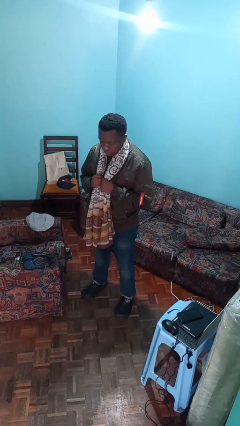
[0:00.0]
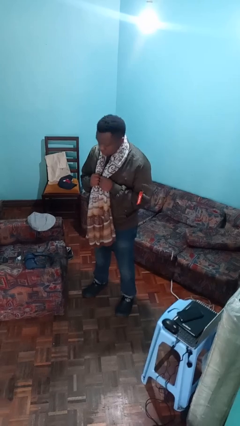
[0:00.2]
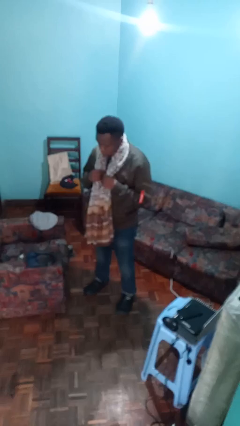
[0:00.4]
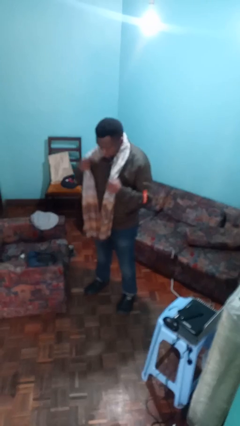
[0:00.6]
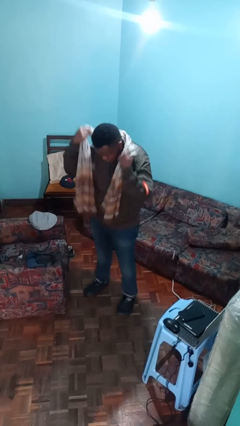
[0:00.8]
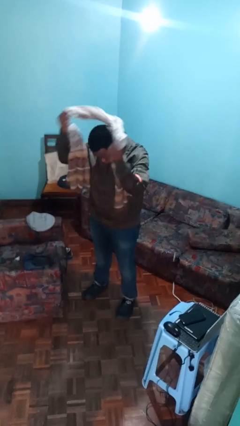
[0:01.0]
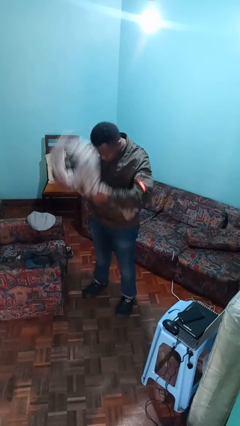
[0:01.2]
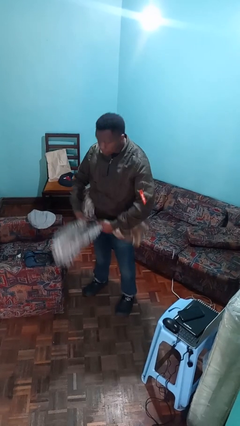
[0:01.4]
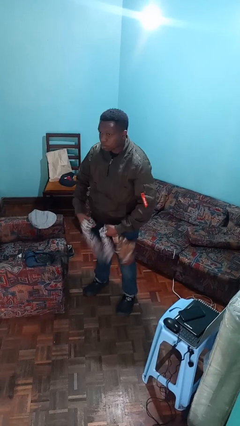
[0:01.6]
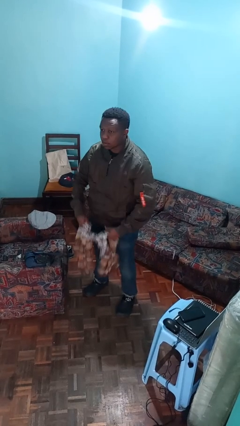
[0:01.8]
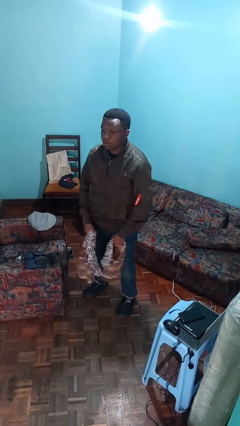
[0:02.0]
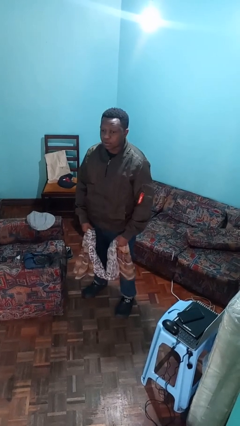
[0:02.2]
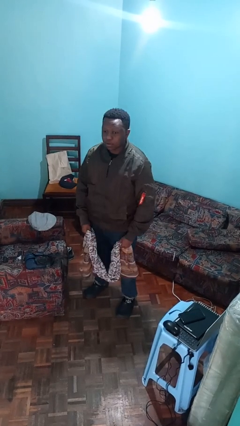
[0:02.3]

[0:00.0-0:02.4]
person takes off scarf

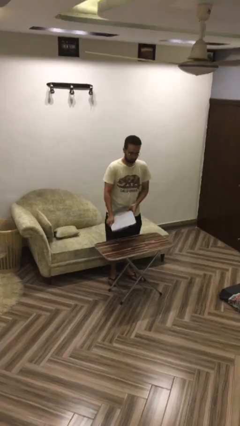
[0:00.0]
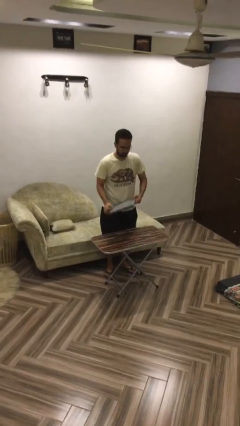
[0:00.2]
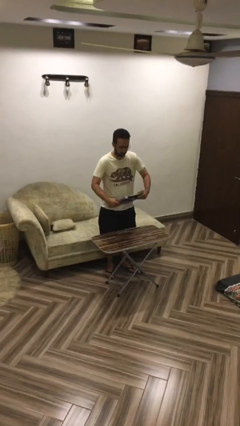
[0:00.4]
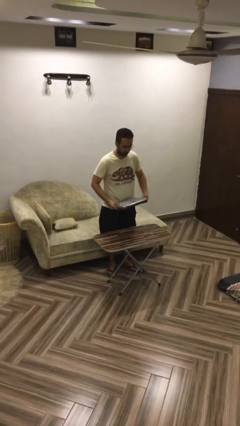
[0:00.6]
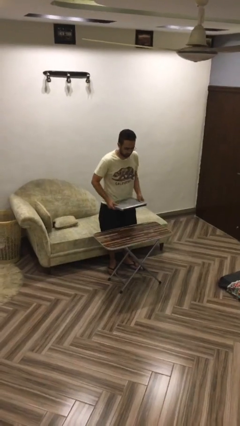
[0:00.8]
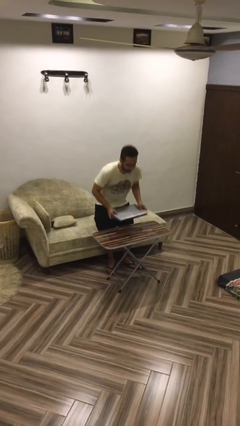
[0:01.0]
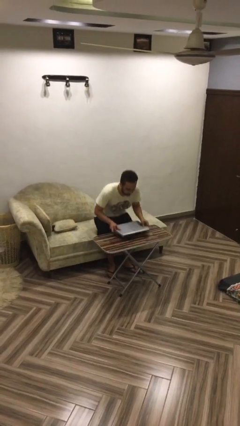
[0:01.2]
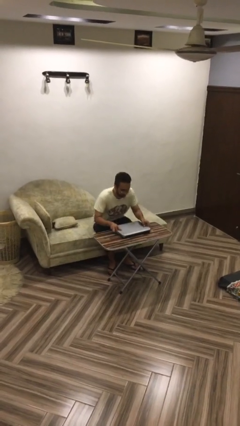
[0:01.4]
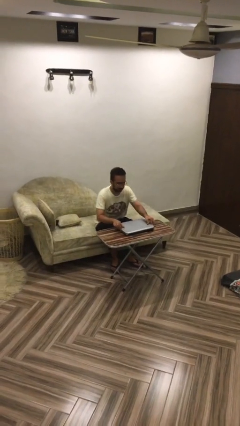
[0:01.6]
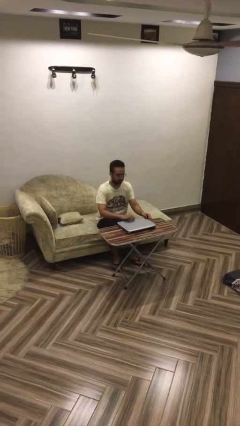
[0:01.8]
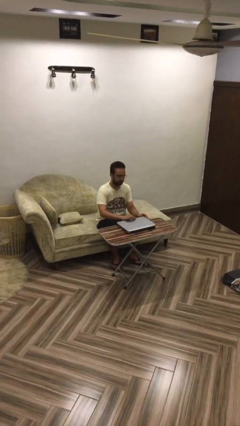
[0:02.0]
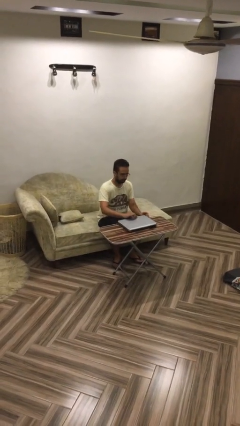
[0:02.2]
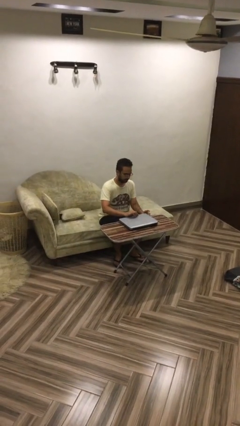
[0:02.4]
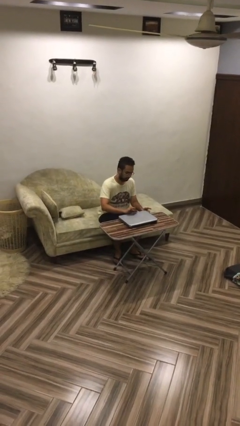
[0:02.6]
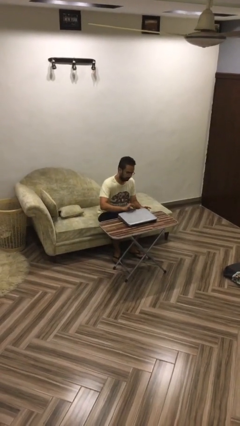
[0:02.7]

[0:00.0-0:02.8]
person sits down

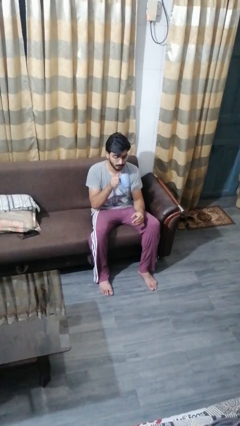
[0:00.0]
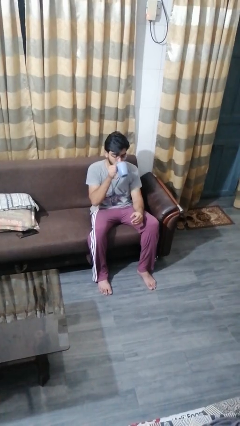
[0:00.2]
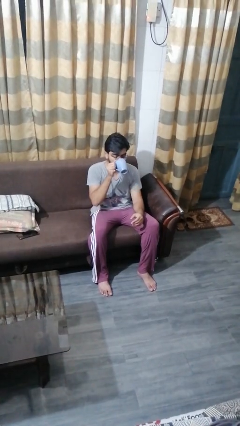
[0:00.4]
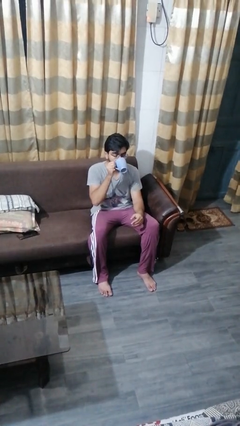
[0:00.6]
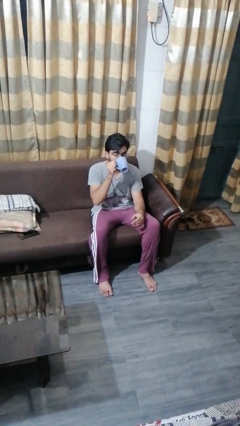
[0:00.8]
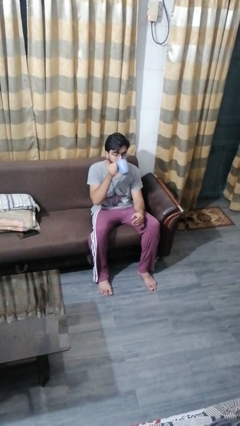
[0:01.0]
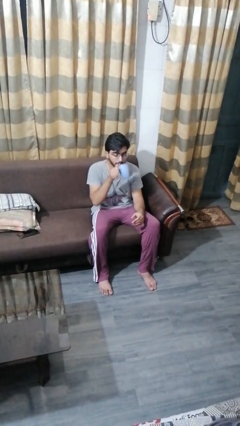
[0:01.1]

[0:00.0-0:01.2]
person drinks from mug

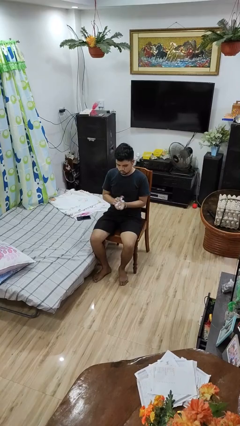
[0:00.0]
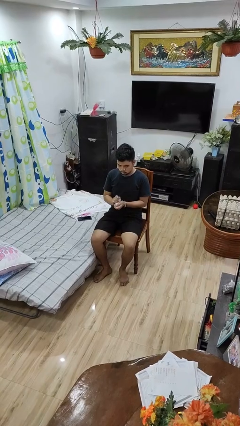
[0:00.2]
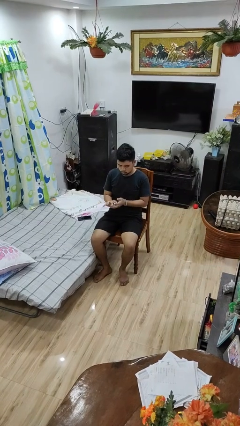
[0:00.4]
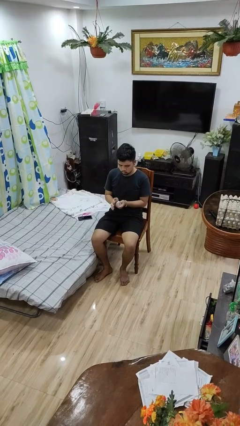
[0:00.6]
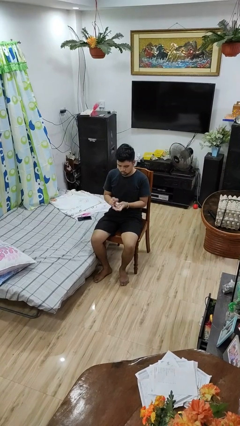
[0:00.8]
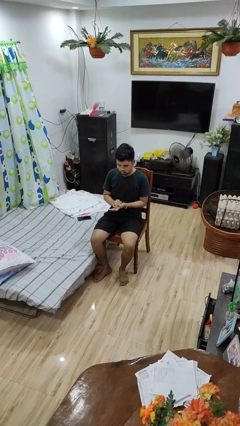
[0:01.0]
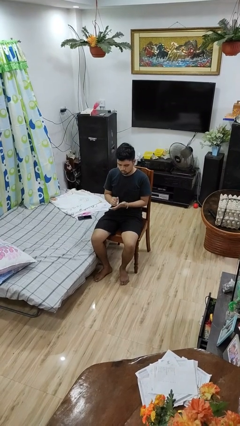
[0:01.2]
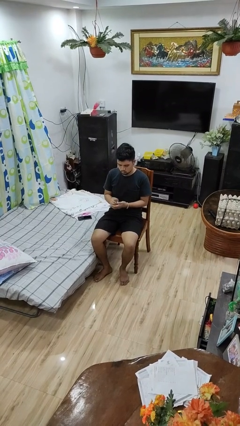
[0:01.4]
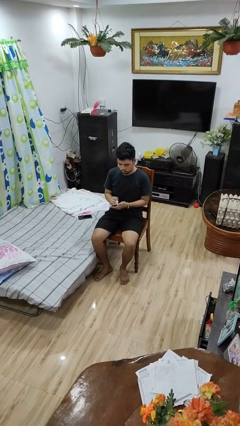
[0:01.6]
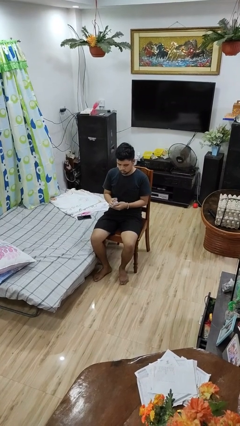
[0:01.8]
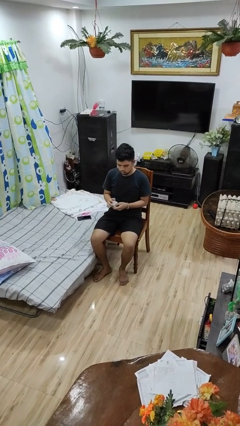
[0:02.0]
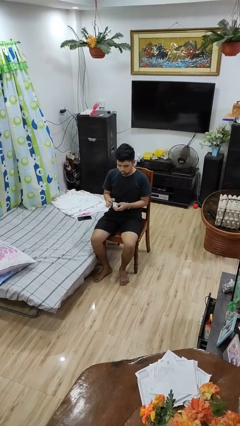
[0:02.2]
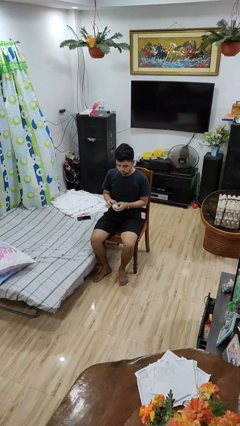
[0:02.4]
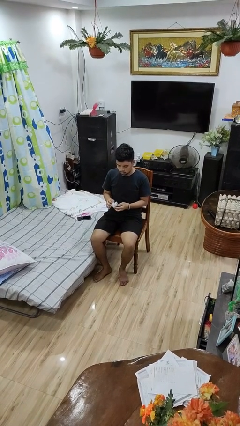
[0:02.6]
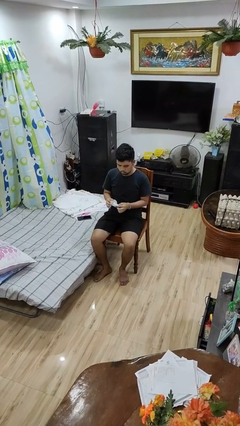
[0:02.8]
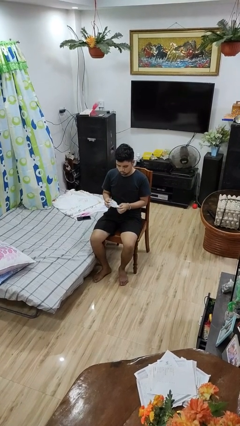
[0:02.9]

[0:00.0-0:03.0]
person crumples paper

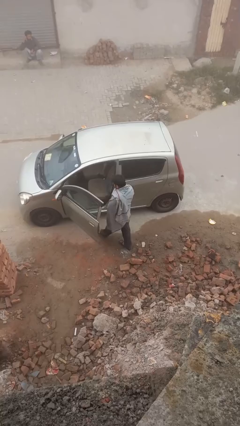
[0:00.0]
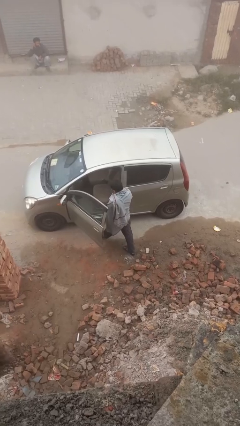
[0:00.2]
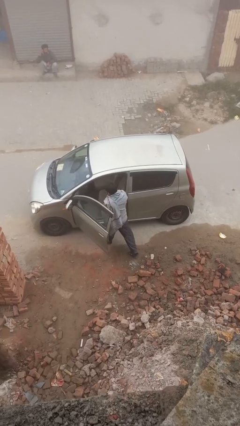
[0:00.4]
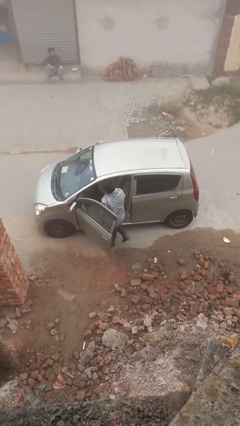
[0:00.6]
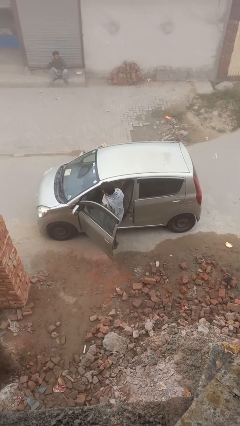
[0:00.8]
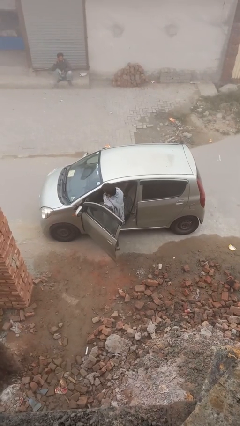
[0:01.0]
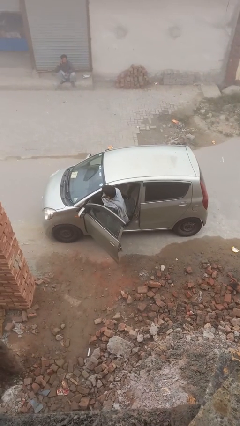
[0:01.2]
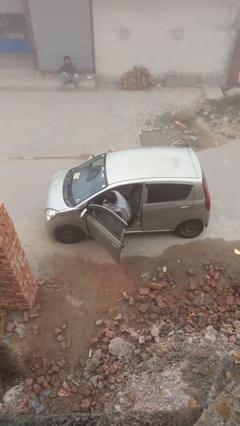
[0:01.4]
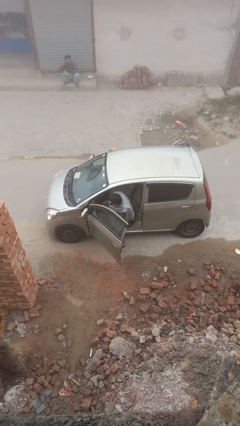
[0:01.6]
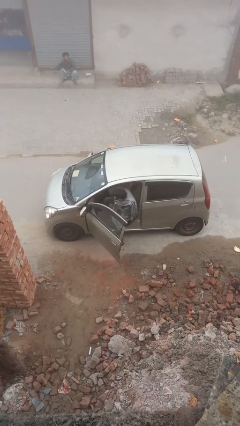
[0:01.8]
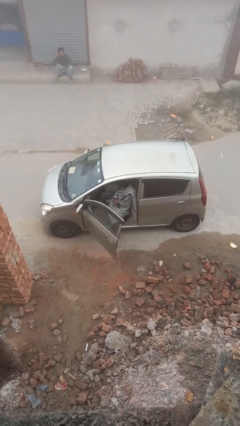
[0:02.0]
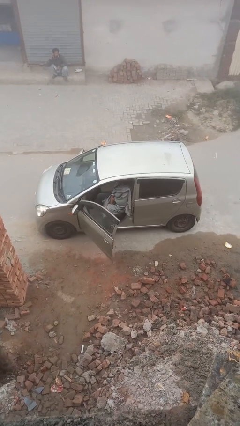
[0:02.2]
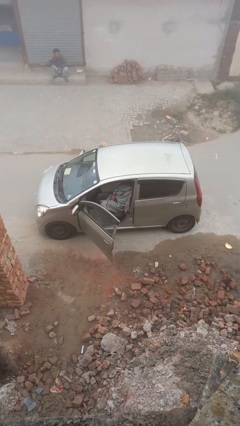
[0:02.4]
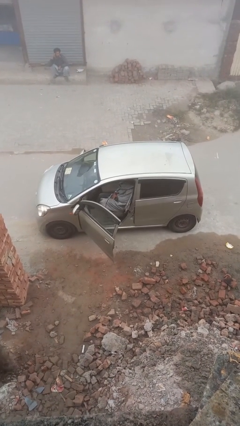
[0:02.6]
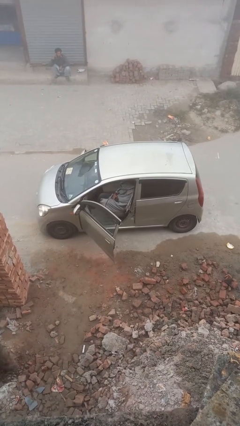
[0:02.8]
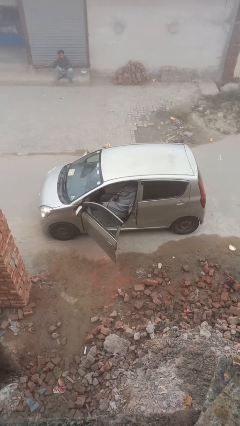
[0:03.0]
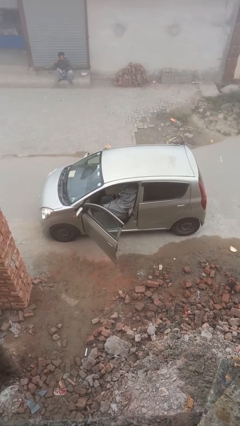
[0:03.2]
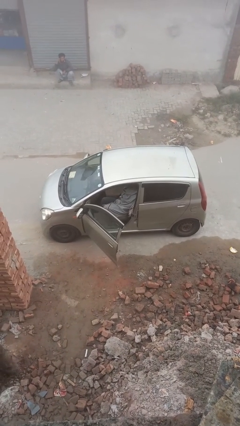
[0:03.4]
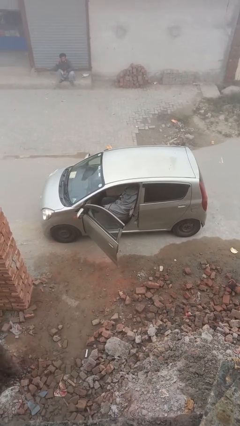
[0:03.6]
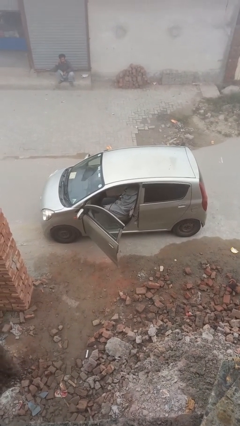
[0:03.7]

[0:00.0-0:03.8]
person enters car

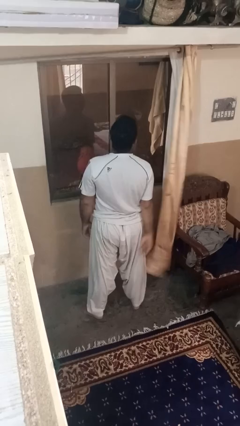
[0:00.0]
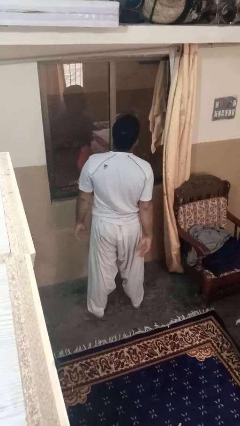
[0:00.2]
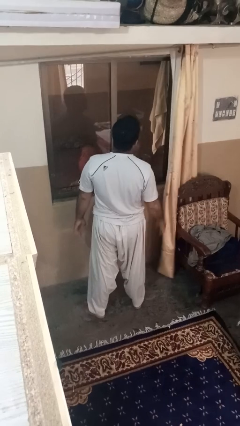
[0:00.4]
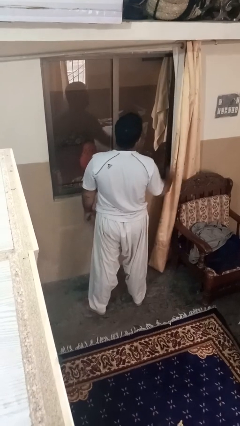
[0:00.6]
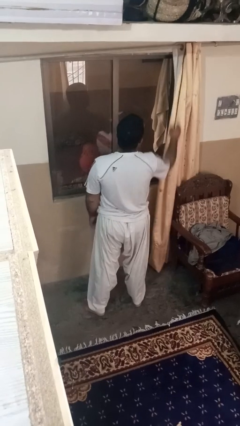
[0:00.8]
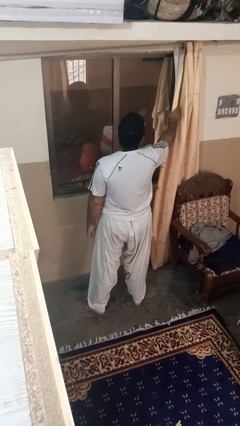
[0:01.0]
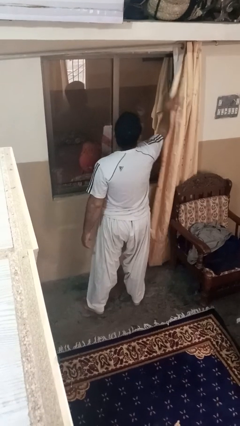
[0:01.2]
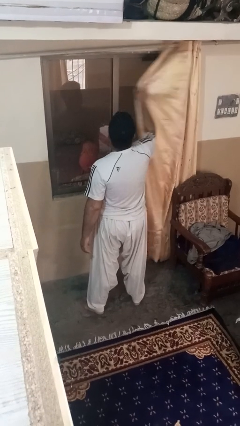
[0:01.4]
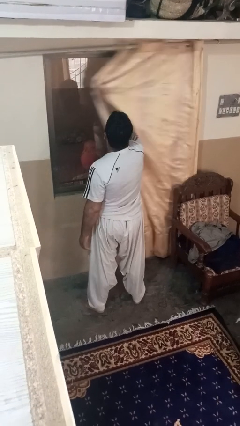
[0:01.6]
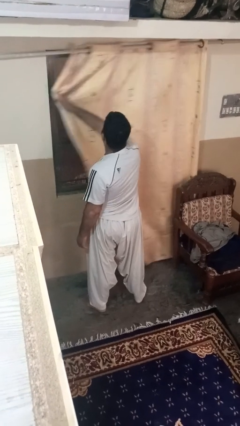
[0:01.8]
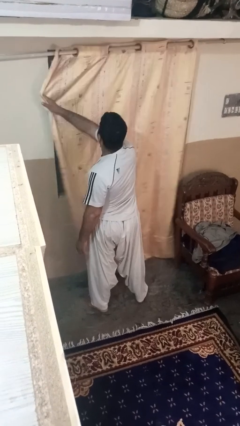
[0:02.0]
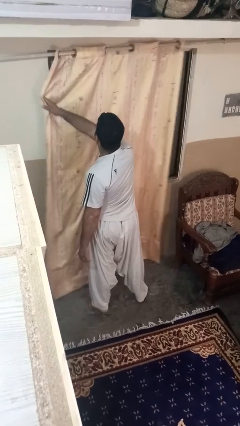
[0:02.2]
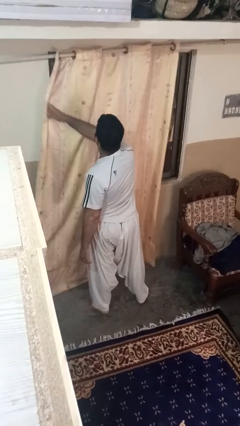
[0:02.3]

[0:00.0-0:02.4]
person closes curtains

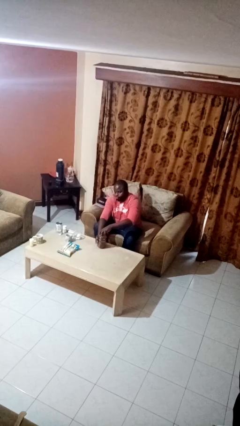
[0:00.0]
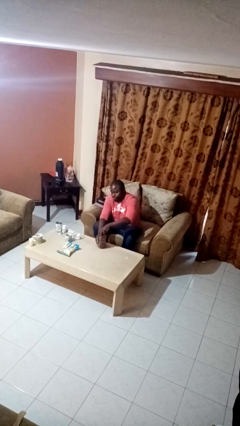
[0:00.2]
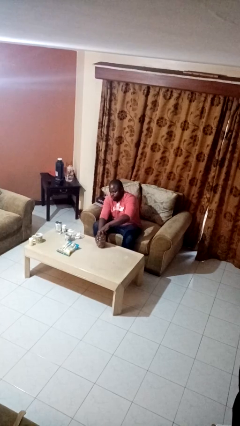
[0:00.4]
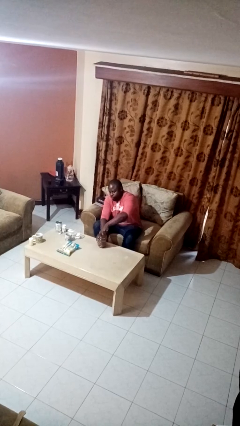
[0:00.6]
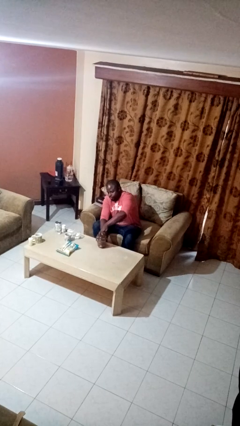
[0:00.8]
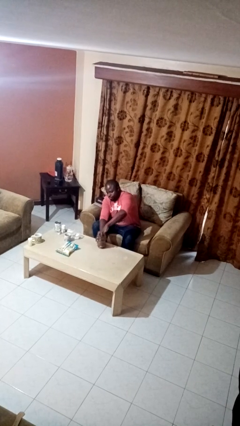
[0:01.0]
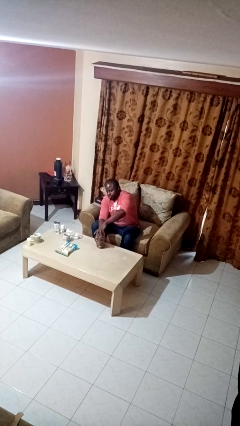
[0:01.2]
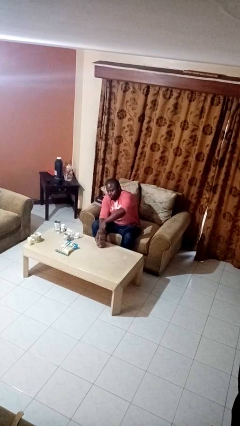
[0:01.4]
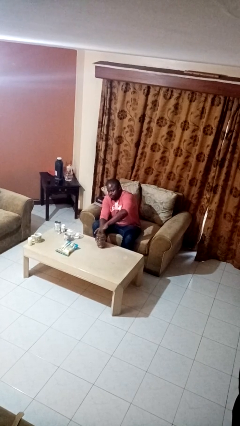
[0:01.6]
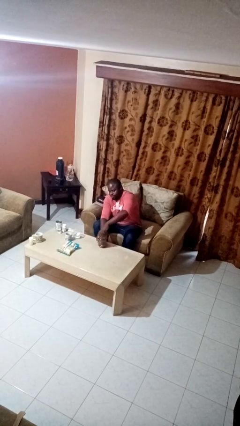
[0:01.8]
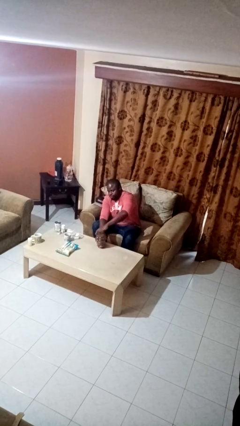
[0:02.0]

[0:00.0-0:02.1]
person closes jar
